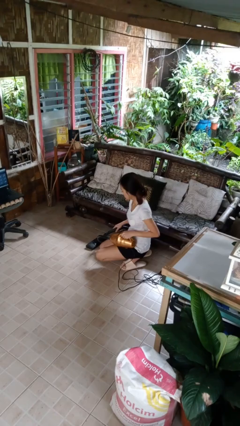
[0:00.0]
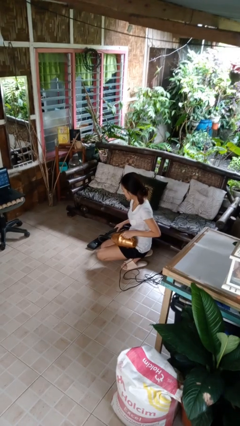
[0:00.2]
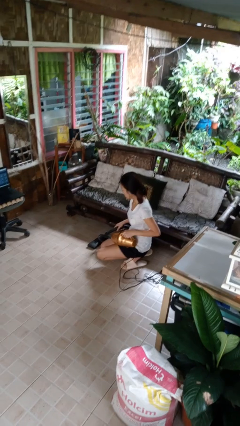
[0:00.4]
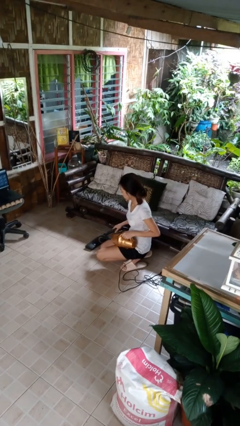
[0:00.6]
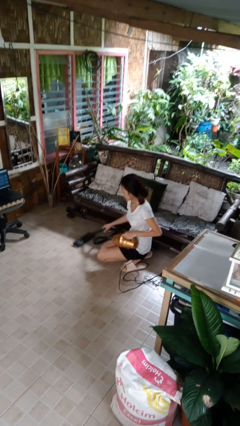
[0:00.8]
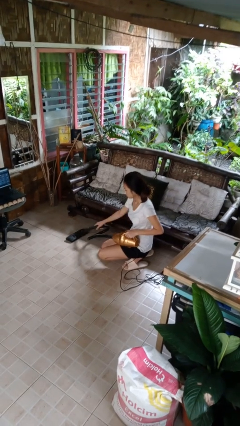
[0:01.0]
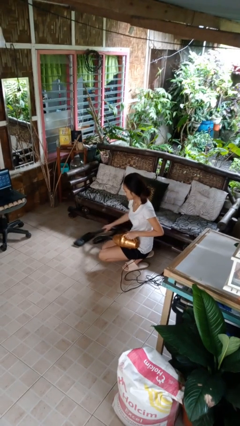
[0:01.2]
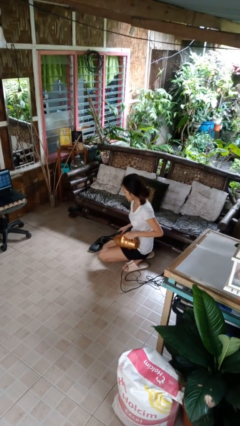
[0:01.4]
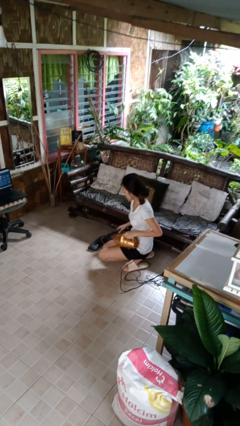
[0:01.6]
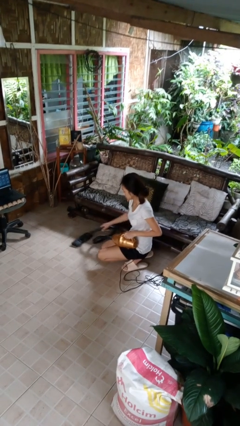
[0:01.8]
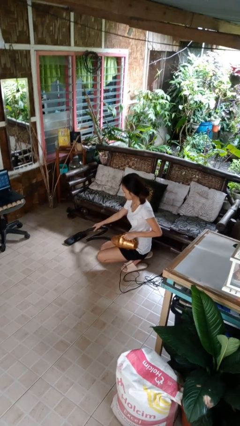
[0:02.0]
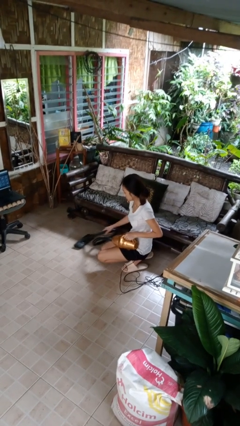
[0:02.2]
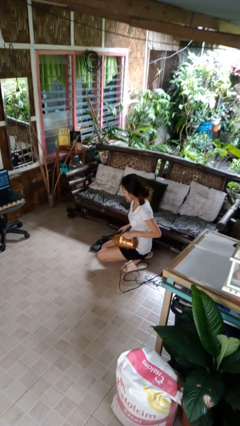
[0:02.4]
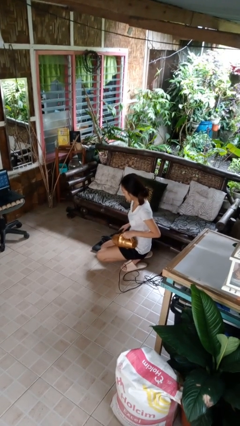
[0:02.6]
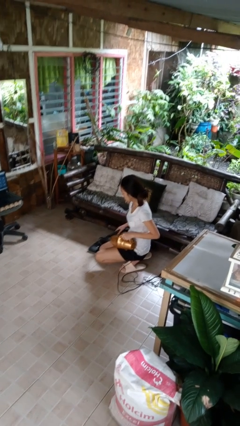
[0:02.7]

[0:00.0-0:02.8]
person vacuums carpet

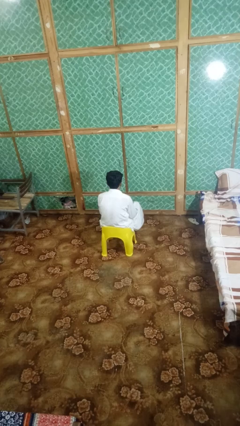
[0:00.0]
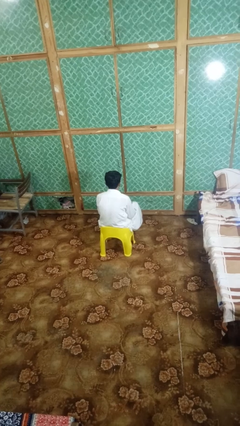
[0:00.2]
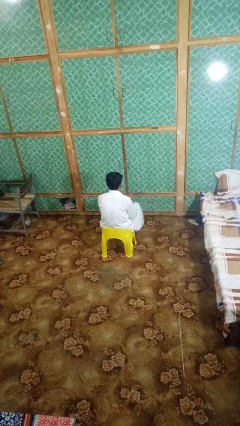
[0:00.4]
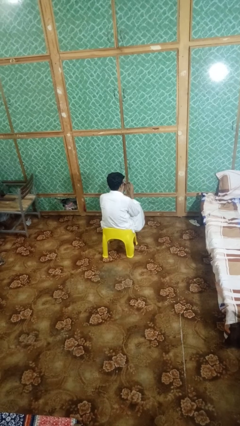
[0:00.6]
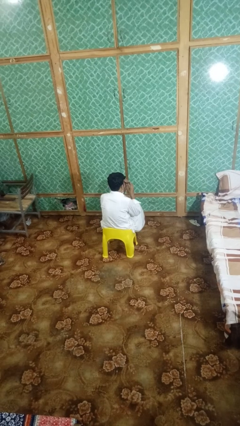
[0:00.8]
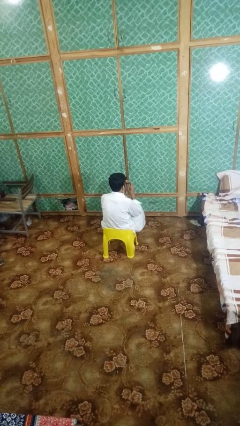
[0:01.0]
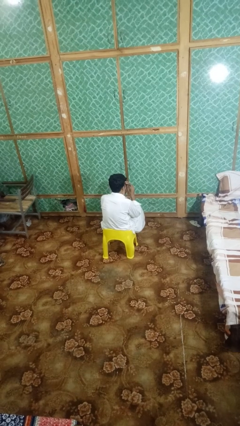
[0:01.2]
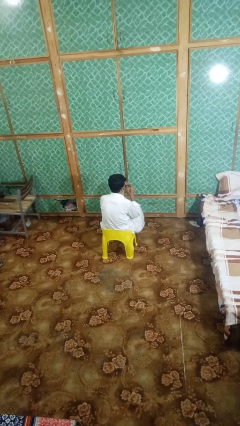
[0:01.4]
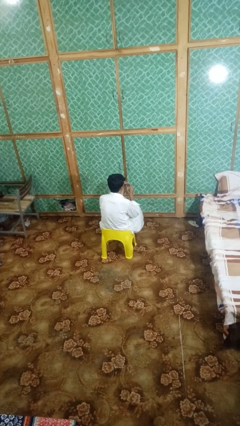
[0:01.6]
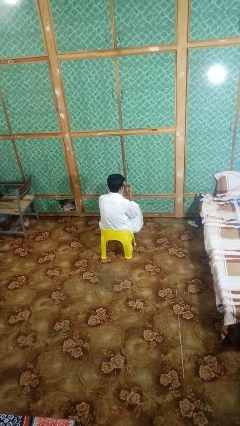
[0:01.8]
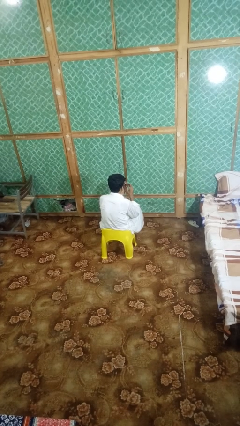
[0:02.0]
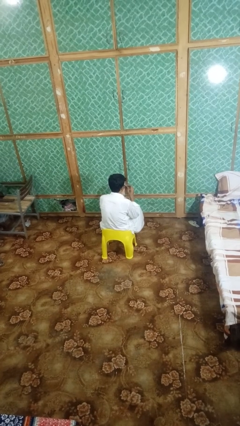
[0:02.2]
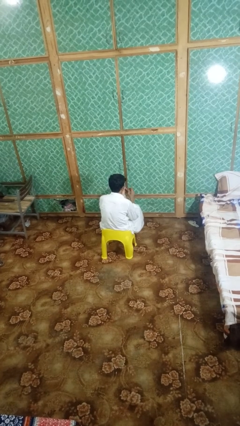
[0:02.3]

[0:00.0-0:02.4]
person clips fingernails

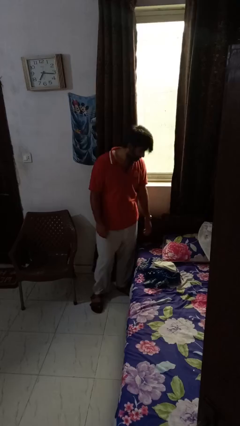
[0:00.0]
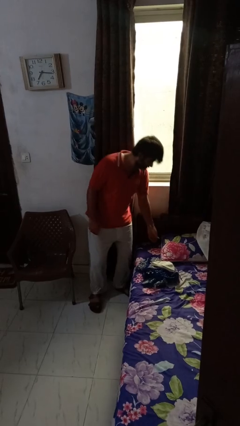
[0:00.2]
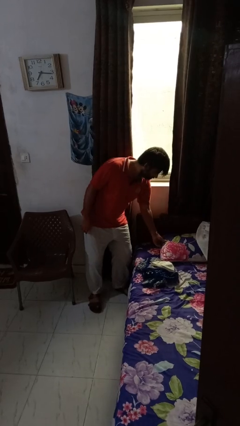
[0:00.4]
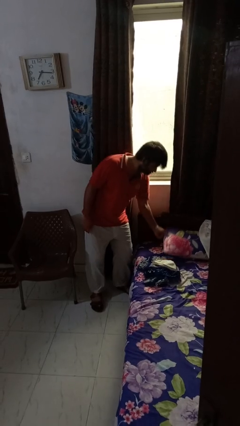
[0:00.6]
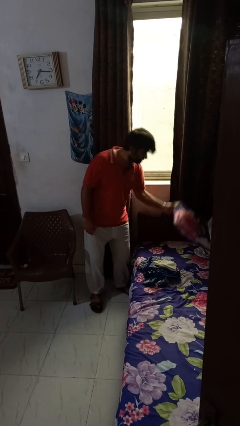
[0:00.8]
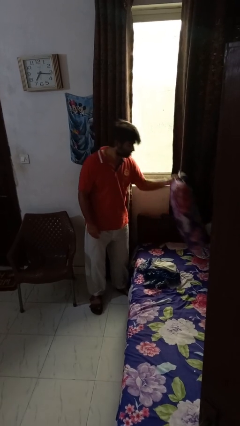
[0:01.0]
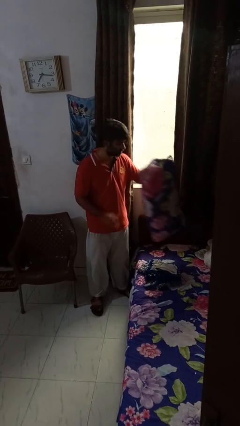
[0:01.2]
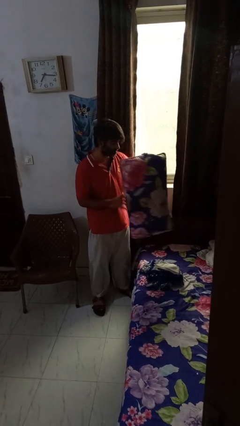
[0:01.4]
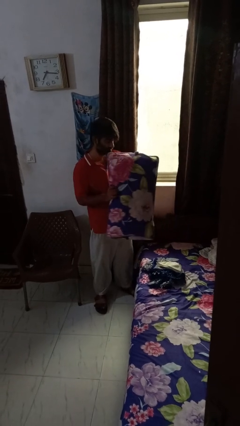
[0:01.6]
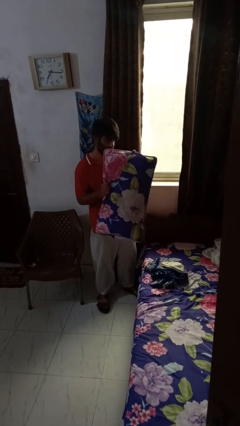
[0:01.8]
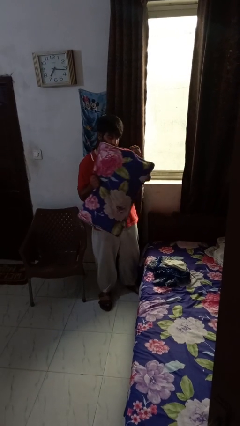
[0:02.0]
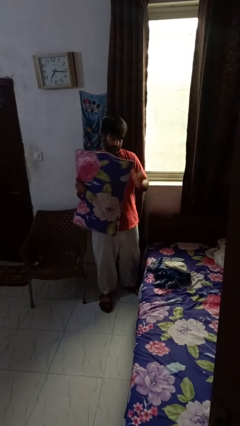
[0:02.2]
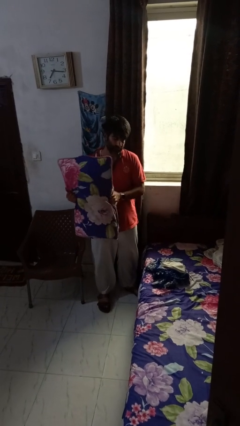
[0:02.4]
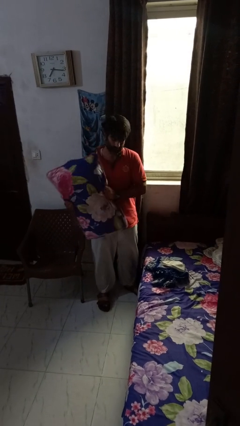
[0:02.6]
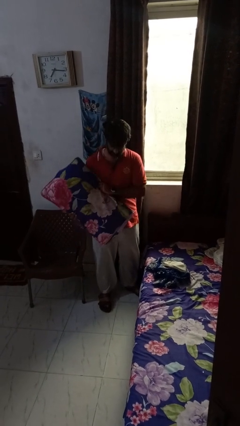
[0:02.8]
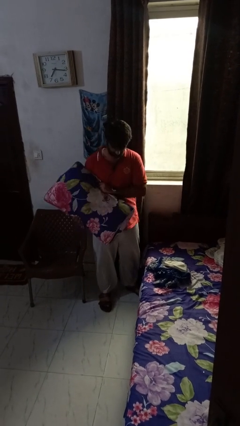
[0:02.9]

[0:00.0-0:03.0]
person picks up object from bed

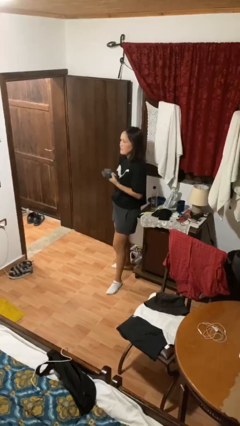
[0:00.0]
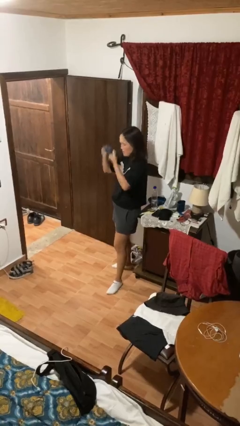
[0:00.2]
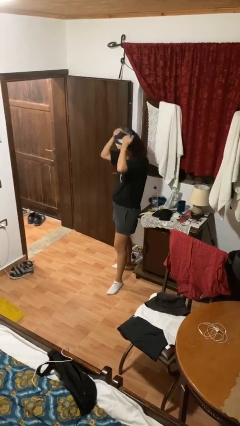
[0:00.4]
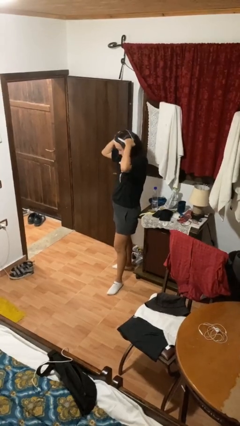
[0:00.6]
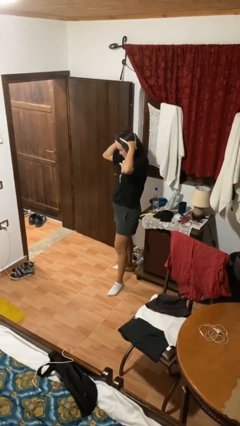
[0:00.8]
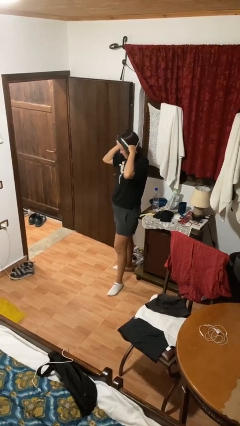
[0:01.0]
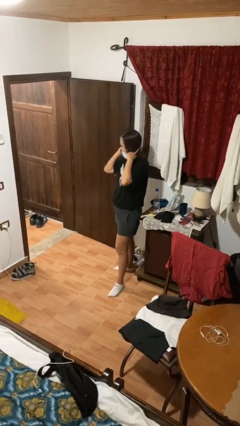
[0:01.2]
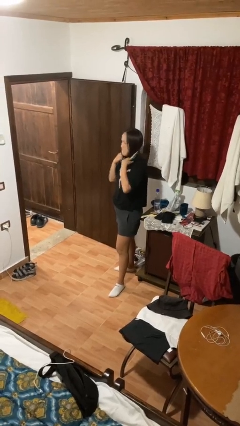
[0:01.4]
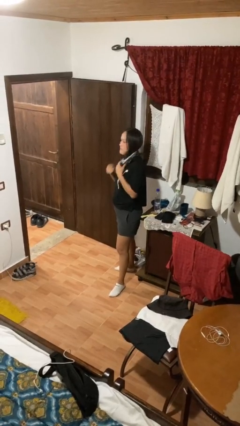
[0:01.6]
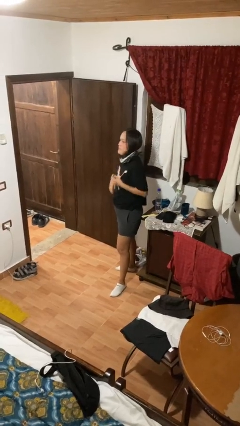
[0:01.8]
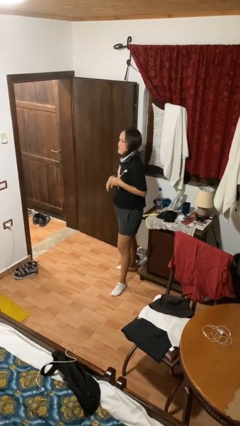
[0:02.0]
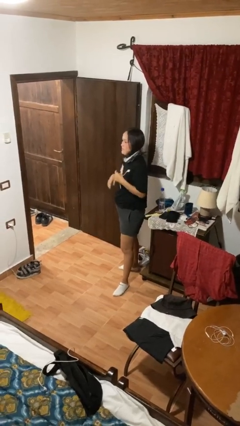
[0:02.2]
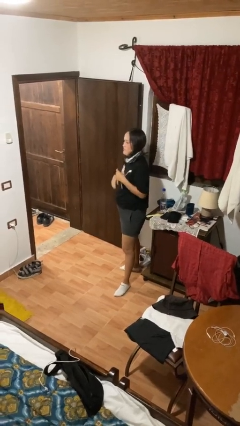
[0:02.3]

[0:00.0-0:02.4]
person puts on scarf

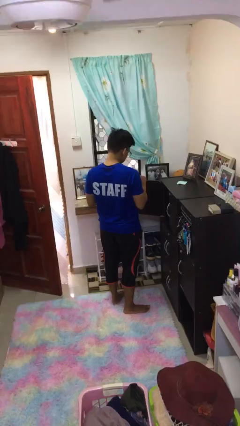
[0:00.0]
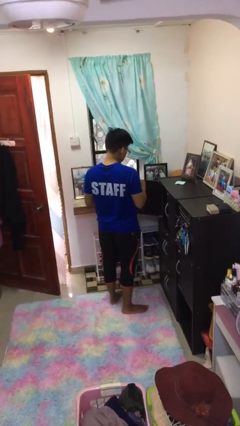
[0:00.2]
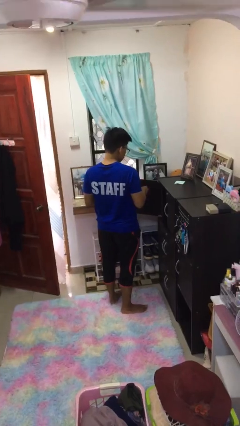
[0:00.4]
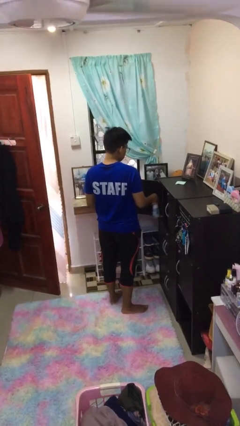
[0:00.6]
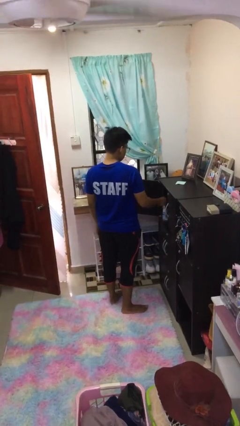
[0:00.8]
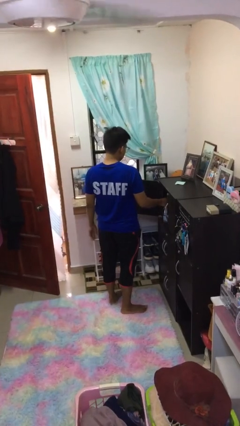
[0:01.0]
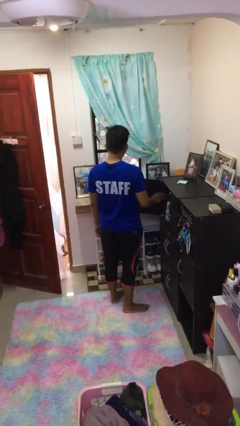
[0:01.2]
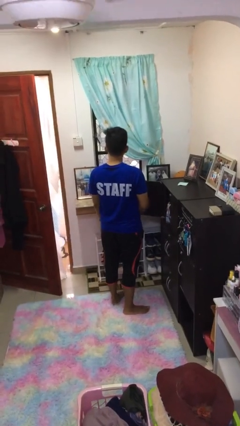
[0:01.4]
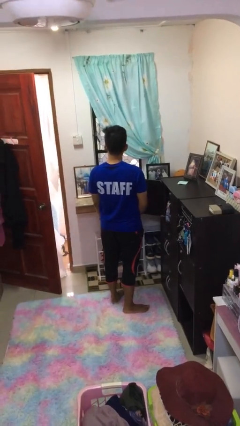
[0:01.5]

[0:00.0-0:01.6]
person puts down object into cabinet

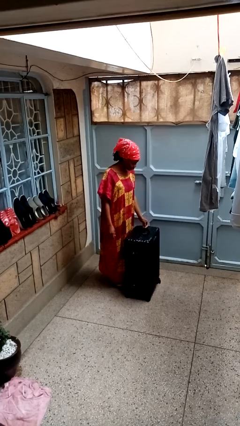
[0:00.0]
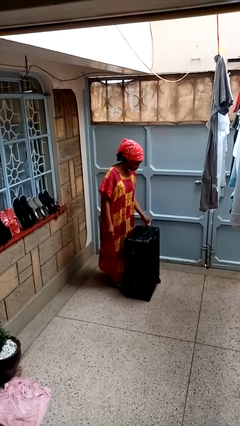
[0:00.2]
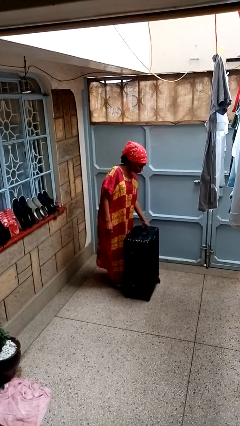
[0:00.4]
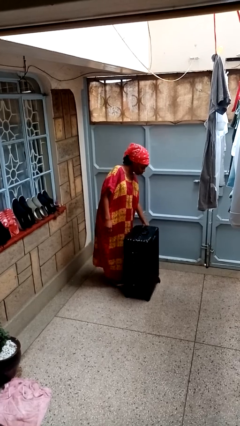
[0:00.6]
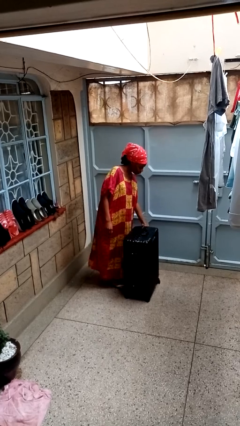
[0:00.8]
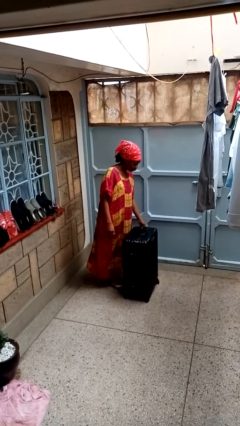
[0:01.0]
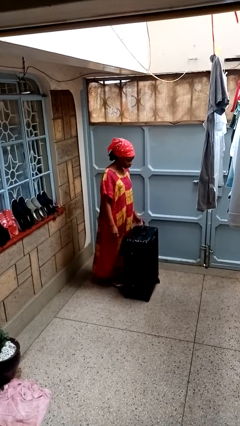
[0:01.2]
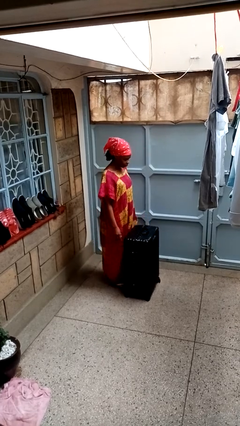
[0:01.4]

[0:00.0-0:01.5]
person closes suitcase

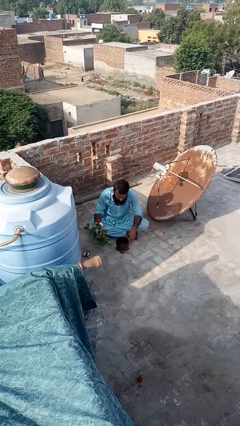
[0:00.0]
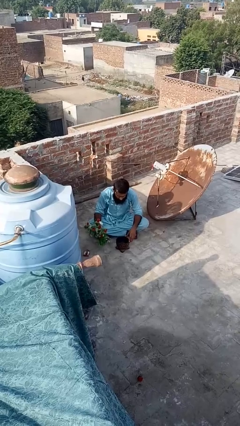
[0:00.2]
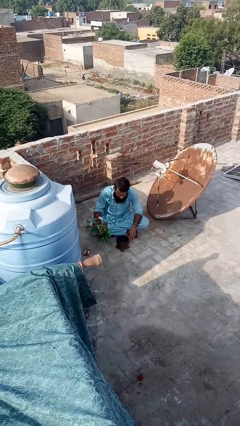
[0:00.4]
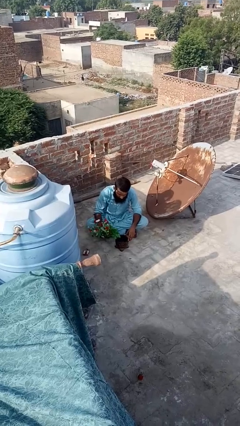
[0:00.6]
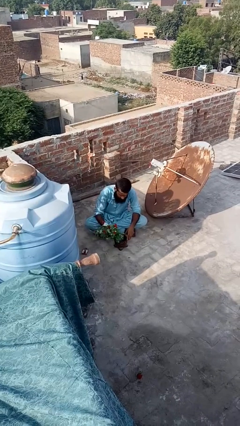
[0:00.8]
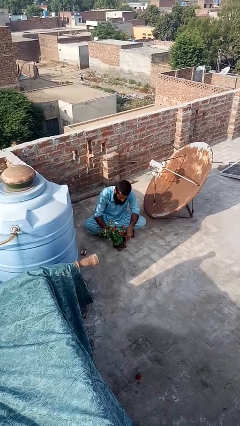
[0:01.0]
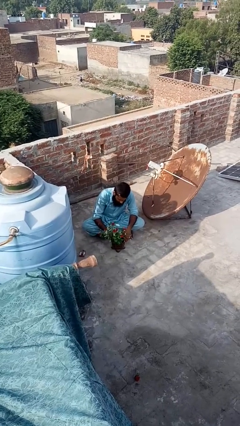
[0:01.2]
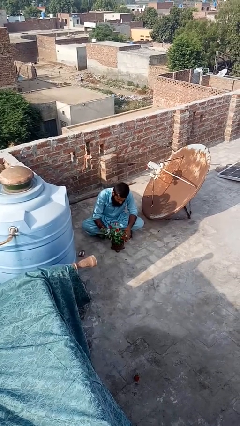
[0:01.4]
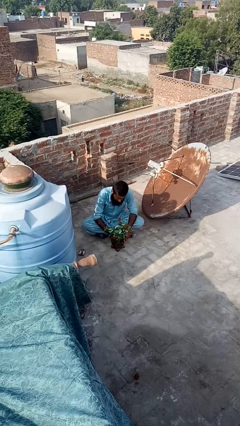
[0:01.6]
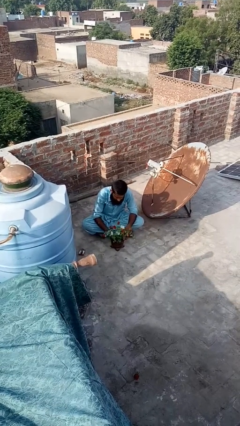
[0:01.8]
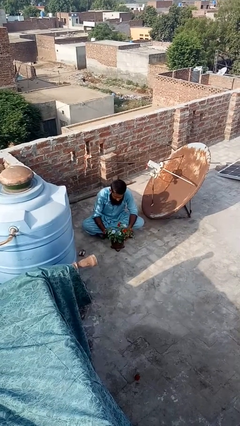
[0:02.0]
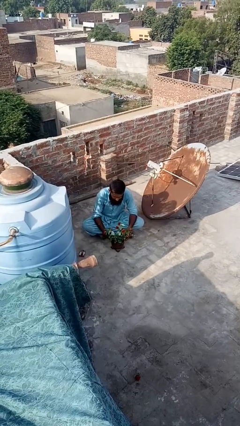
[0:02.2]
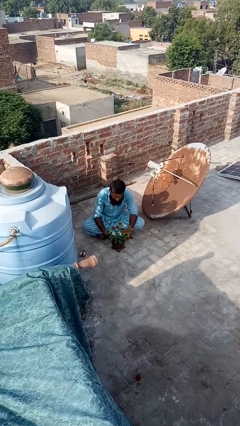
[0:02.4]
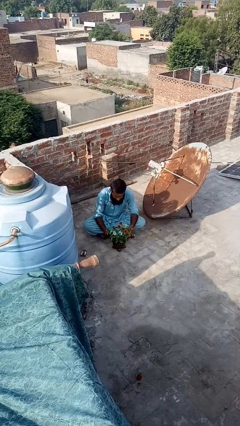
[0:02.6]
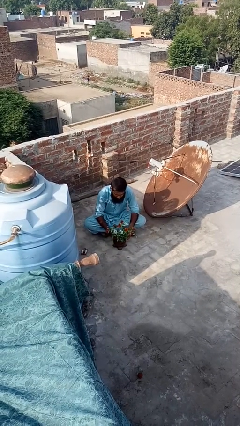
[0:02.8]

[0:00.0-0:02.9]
person arranges flowers in vase

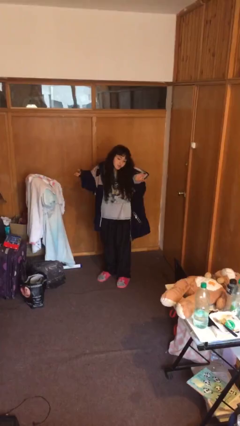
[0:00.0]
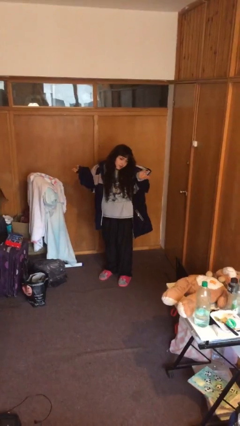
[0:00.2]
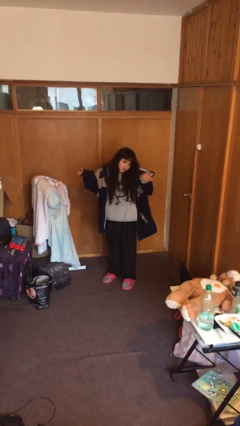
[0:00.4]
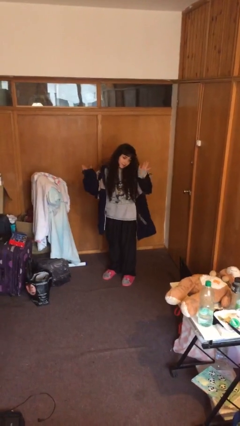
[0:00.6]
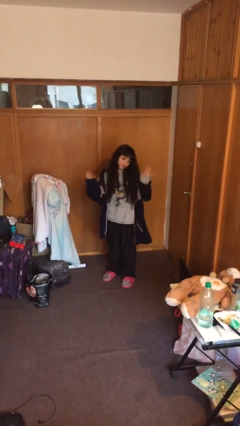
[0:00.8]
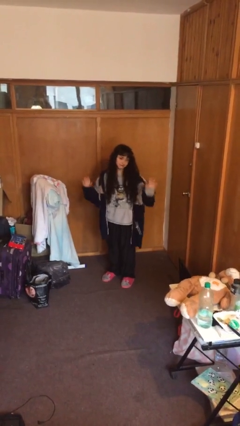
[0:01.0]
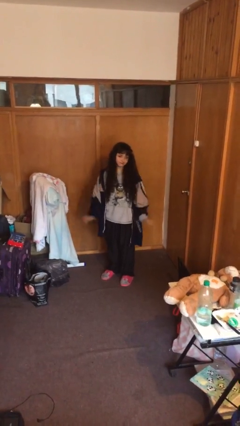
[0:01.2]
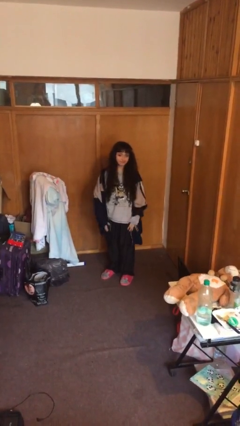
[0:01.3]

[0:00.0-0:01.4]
person shrugs
